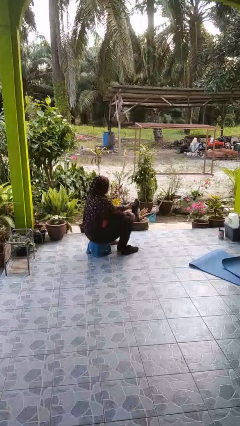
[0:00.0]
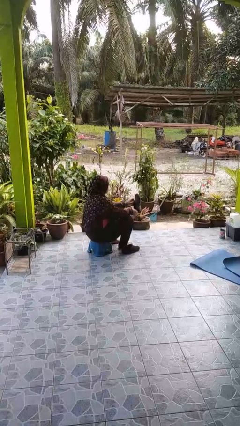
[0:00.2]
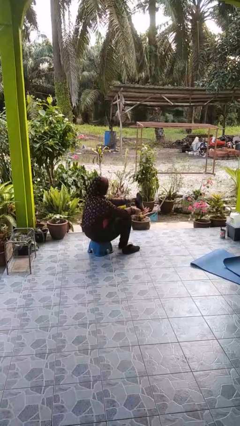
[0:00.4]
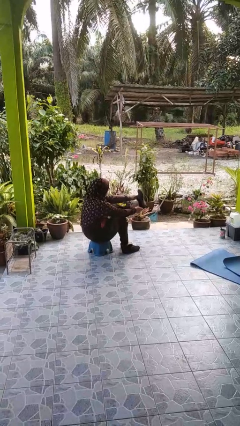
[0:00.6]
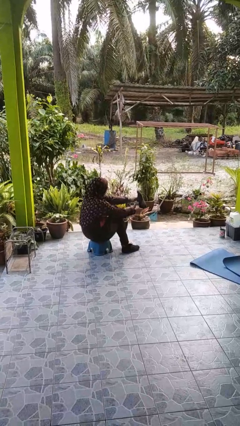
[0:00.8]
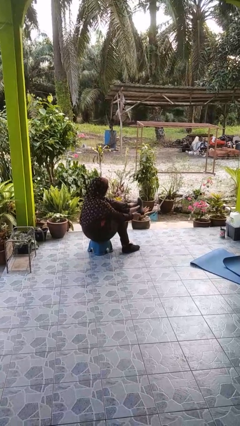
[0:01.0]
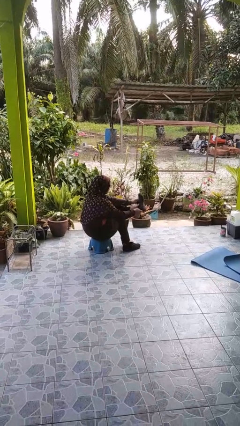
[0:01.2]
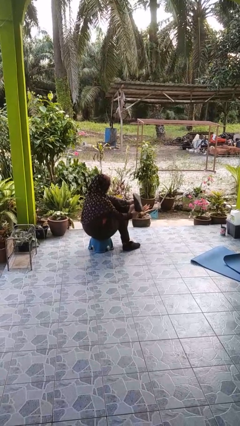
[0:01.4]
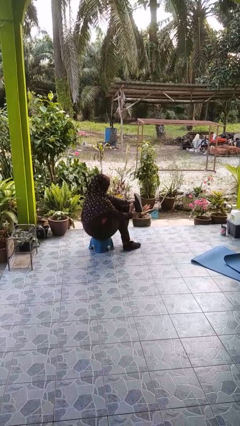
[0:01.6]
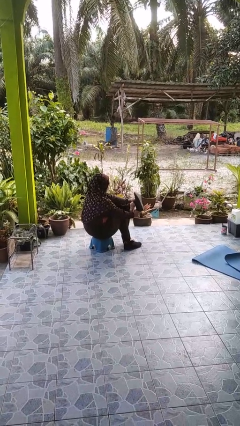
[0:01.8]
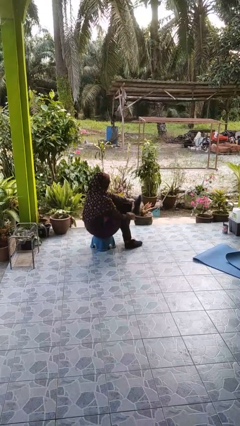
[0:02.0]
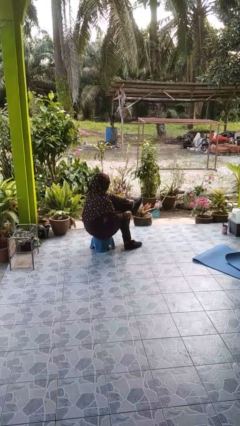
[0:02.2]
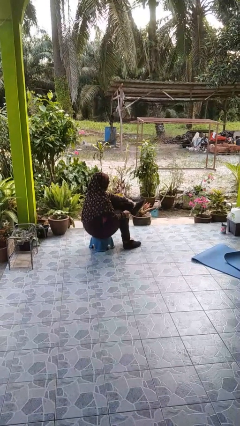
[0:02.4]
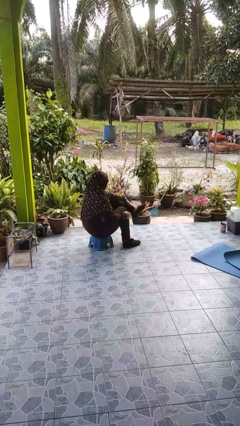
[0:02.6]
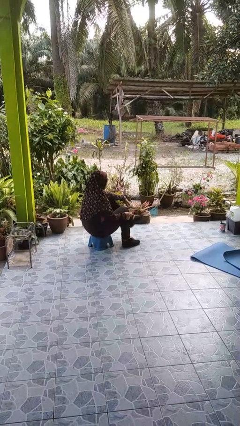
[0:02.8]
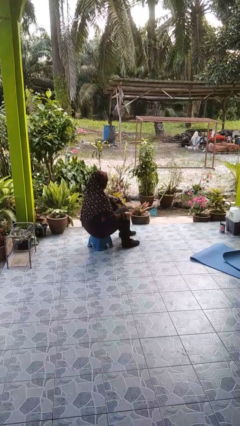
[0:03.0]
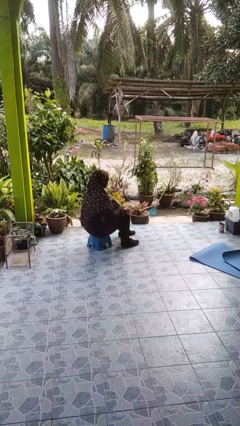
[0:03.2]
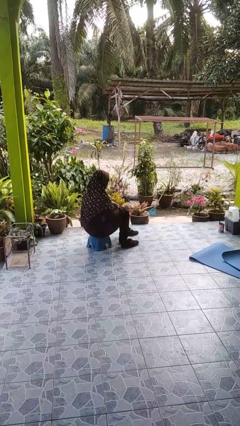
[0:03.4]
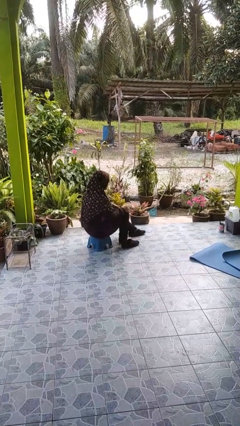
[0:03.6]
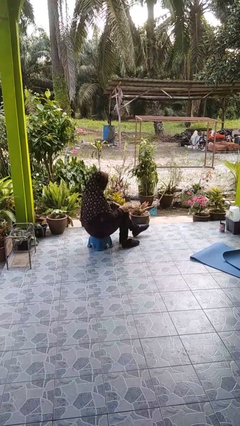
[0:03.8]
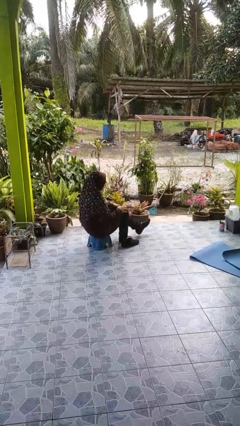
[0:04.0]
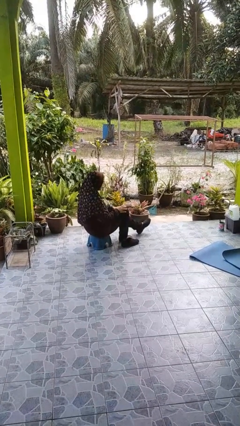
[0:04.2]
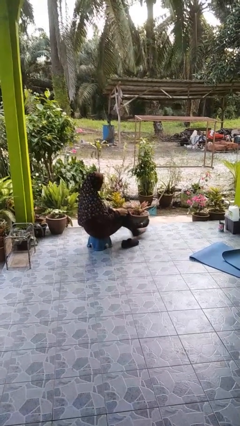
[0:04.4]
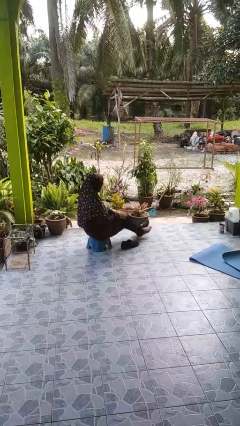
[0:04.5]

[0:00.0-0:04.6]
person puts on shoes

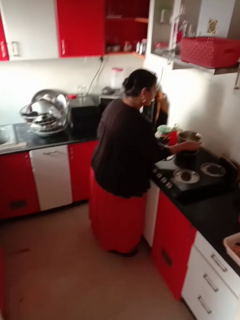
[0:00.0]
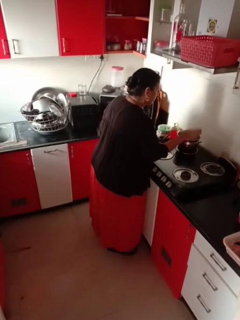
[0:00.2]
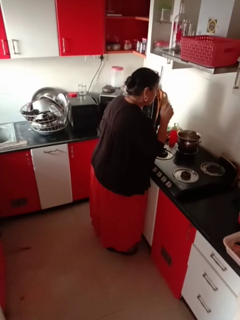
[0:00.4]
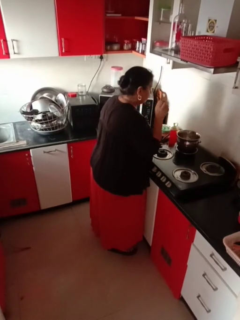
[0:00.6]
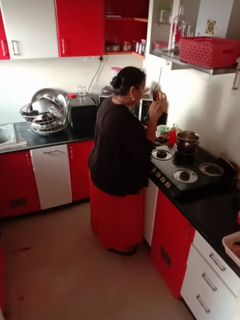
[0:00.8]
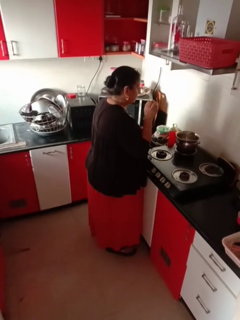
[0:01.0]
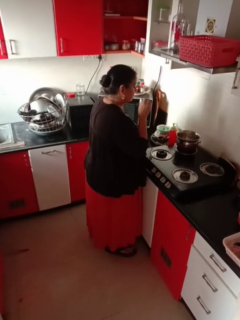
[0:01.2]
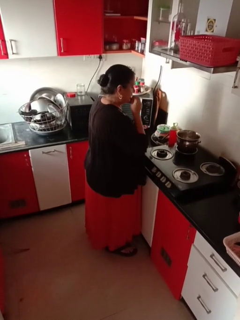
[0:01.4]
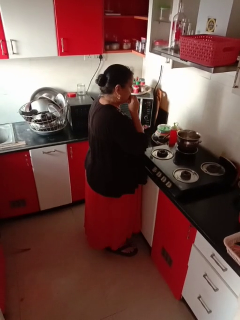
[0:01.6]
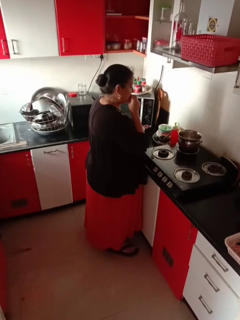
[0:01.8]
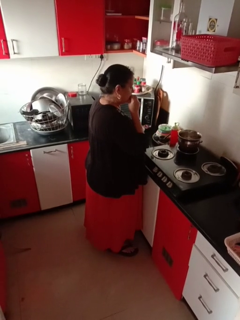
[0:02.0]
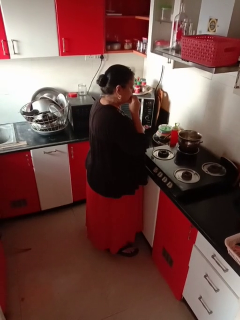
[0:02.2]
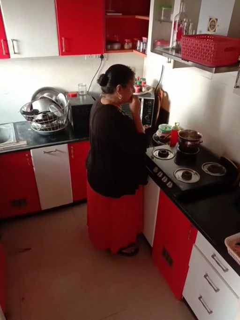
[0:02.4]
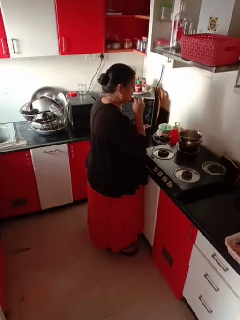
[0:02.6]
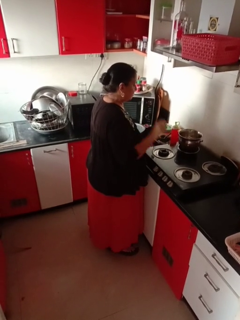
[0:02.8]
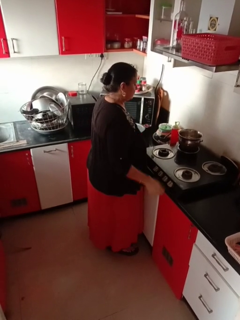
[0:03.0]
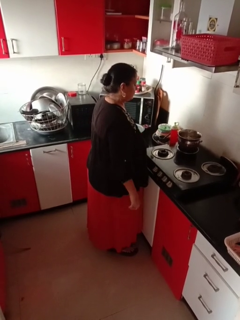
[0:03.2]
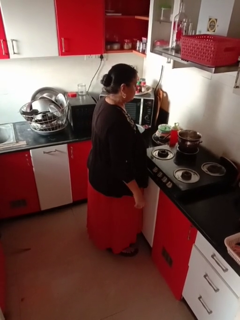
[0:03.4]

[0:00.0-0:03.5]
person burns hand

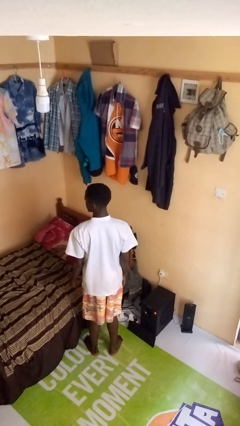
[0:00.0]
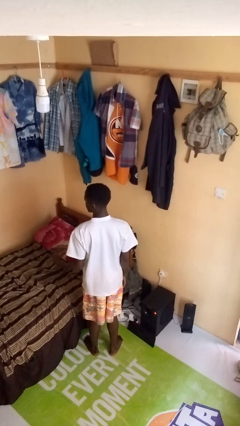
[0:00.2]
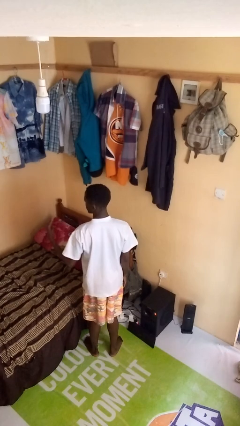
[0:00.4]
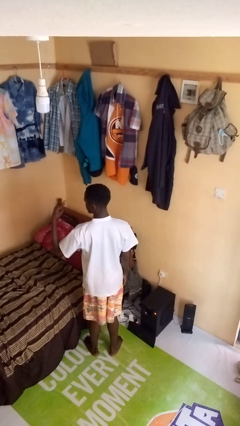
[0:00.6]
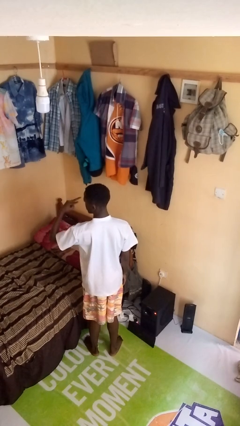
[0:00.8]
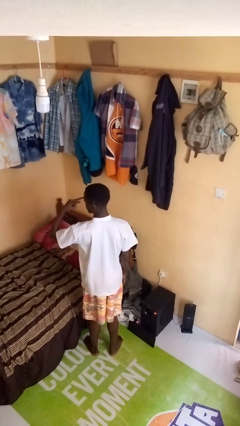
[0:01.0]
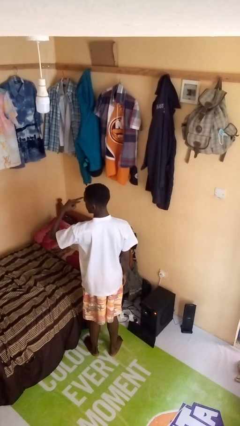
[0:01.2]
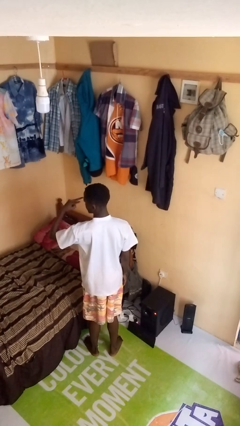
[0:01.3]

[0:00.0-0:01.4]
person gestures watch closely

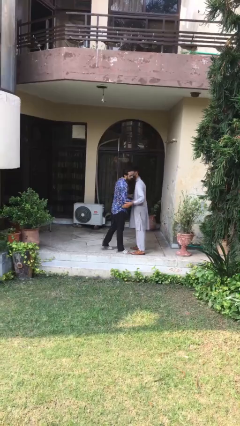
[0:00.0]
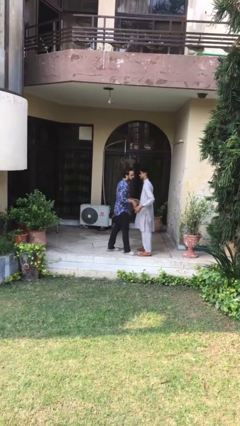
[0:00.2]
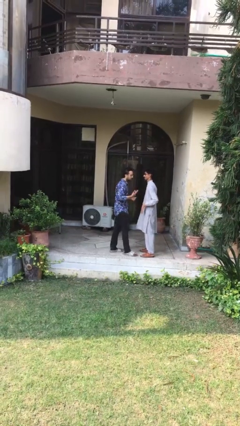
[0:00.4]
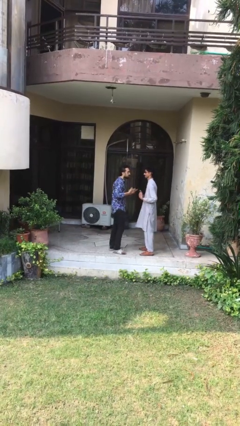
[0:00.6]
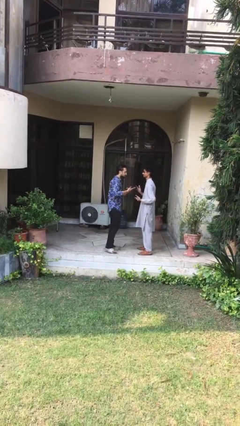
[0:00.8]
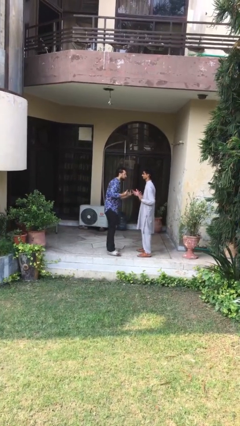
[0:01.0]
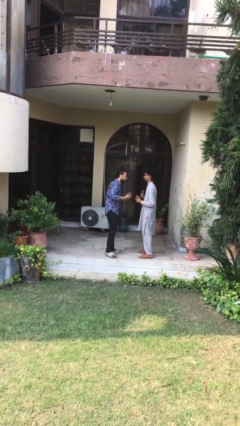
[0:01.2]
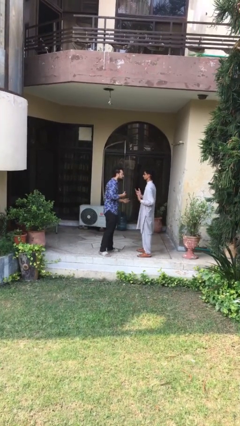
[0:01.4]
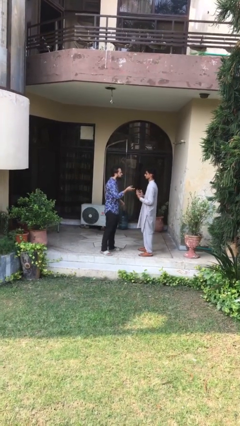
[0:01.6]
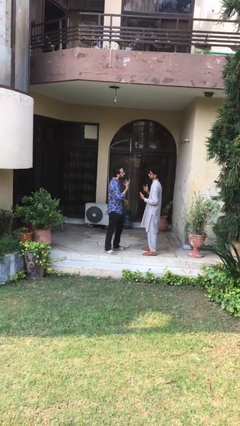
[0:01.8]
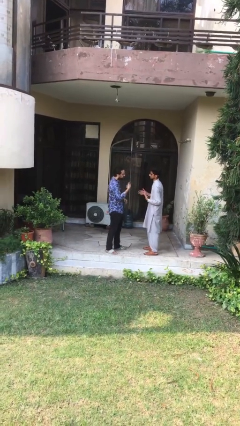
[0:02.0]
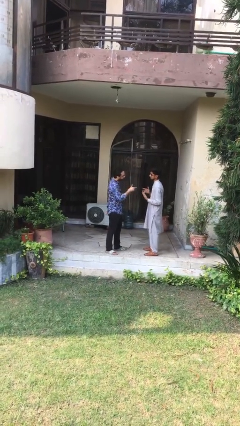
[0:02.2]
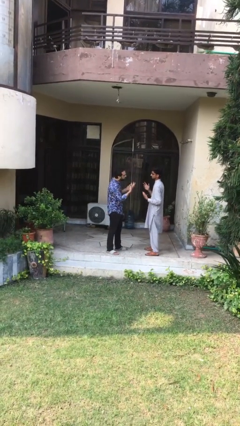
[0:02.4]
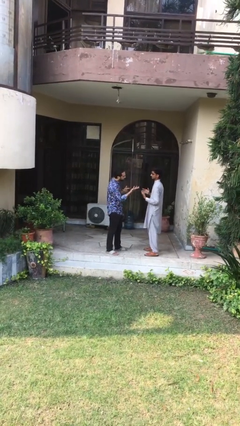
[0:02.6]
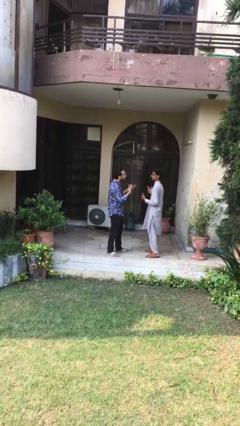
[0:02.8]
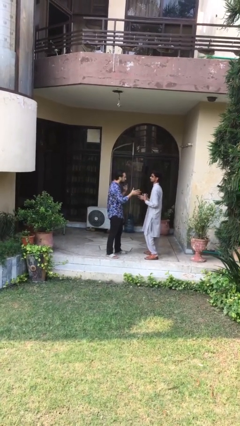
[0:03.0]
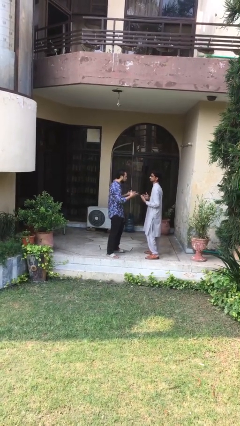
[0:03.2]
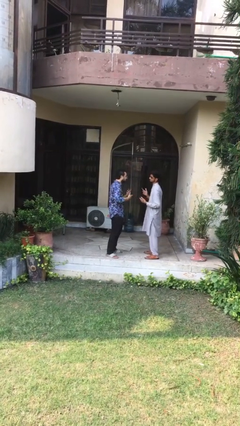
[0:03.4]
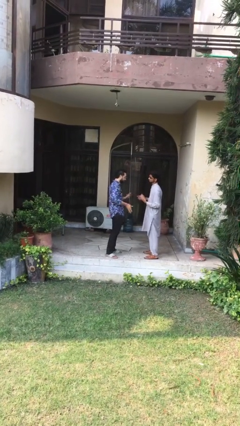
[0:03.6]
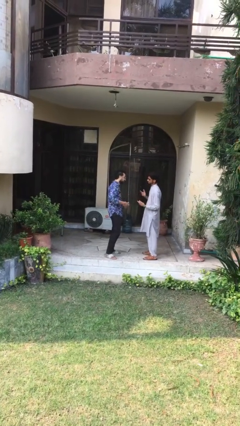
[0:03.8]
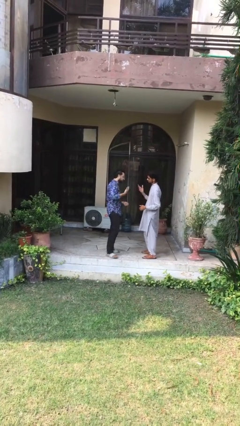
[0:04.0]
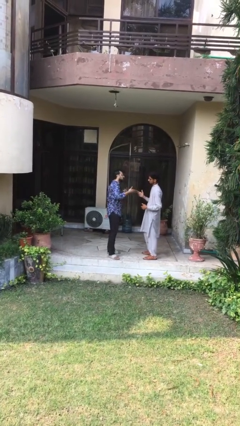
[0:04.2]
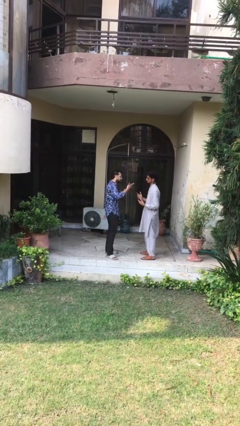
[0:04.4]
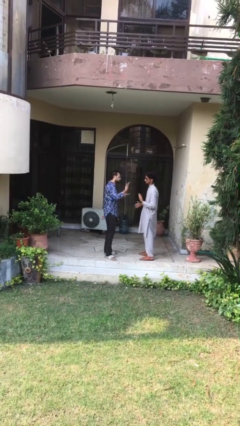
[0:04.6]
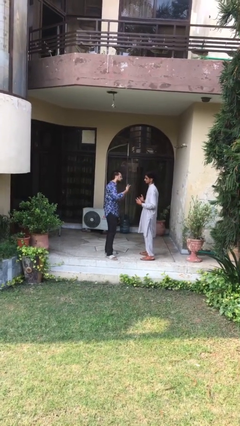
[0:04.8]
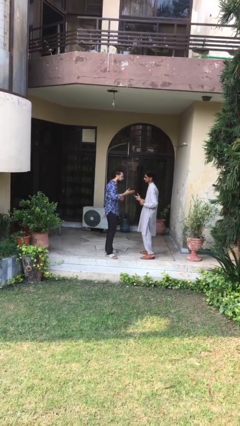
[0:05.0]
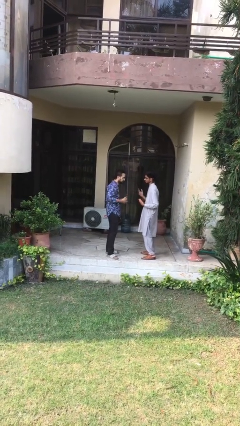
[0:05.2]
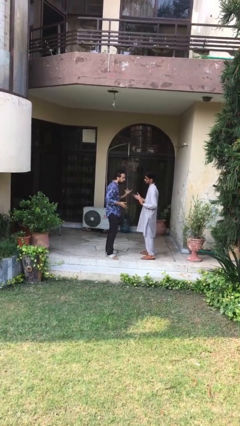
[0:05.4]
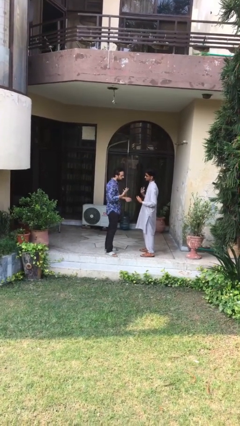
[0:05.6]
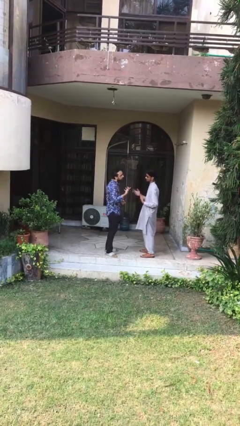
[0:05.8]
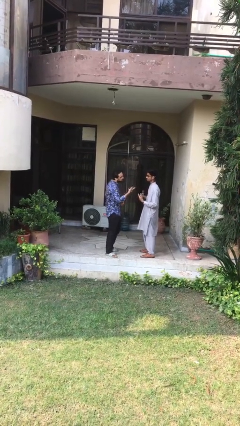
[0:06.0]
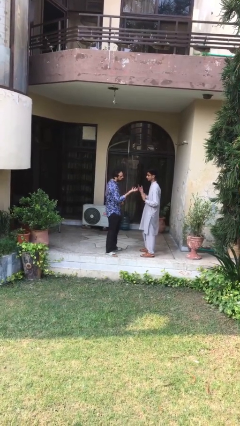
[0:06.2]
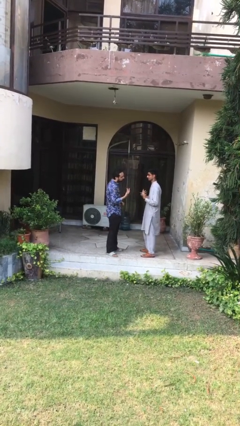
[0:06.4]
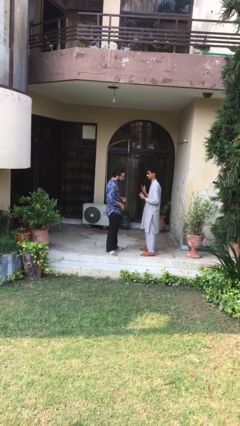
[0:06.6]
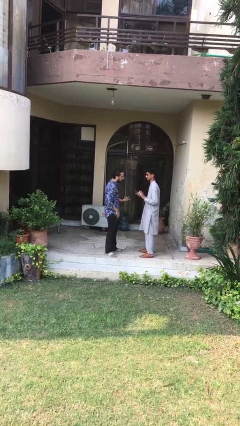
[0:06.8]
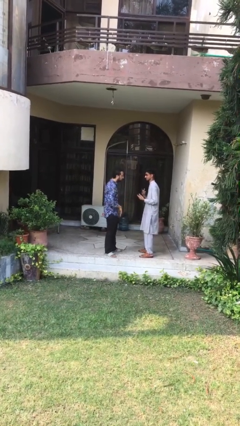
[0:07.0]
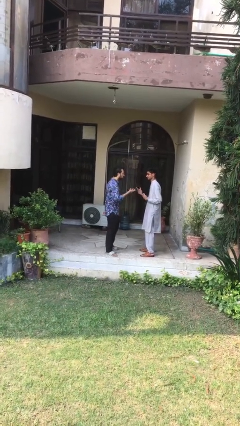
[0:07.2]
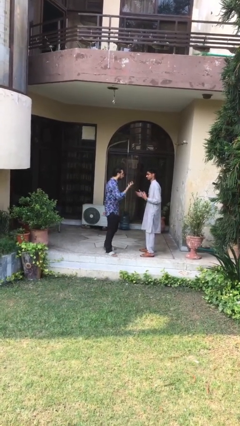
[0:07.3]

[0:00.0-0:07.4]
person talks to person

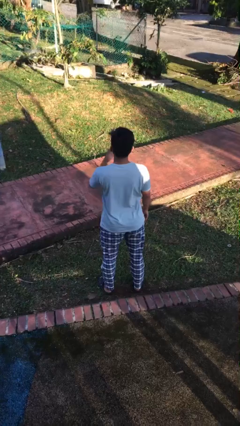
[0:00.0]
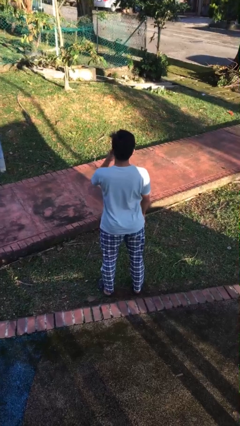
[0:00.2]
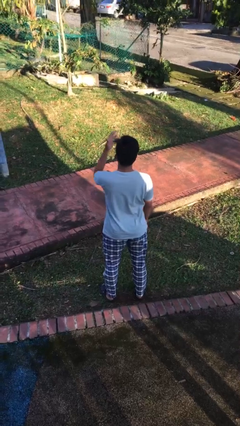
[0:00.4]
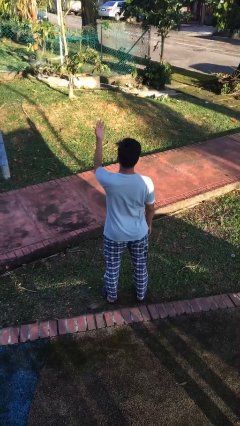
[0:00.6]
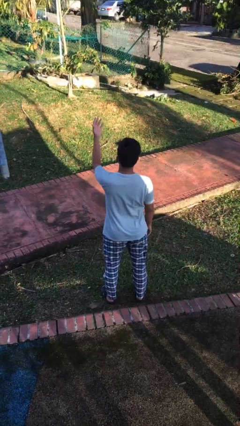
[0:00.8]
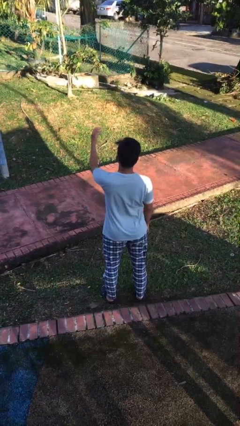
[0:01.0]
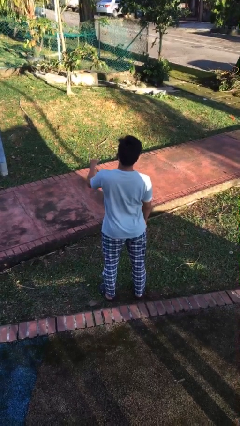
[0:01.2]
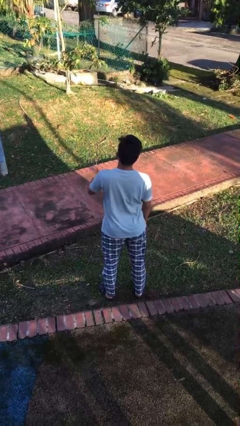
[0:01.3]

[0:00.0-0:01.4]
person gestures blow kiss
